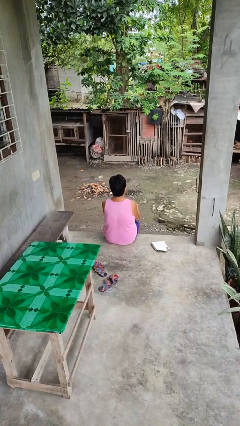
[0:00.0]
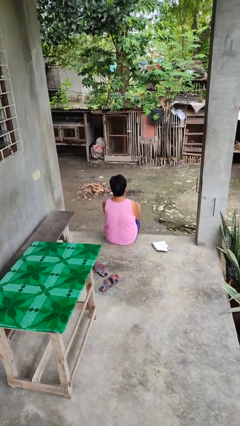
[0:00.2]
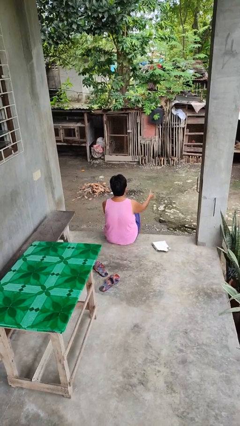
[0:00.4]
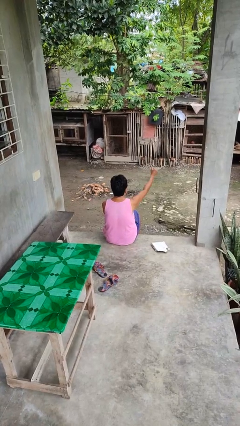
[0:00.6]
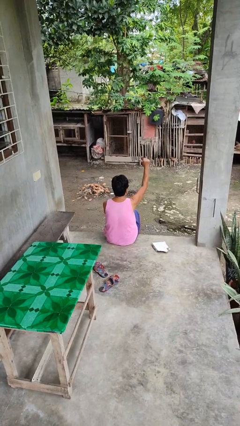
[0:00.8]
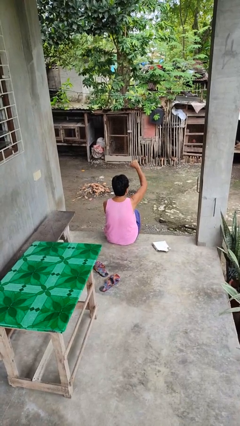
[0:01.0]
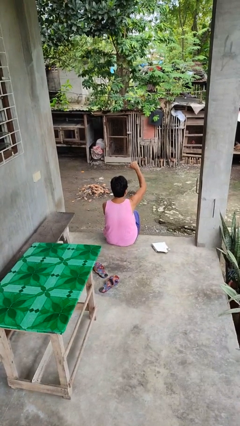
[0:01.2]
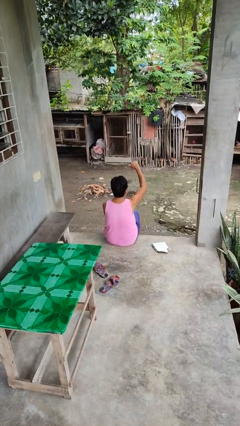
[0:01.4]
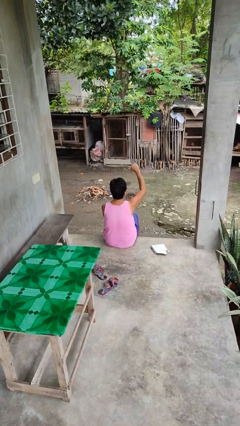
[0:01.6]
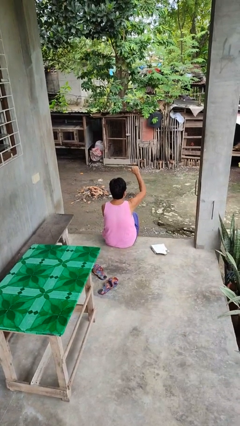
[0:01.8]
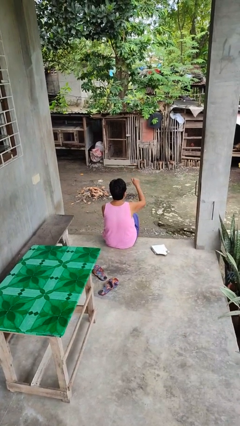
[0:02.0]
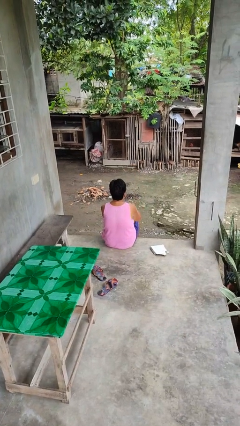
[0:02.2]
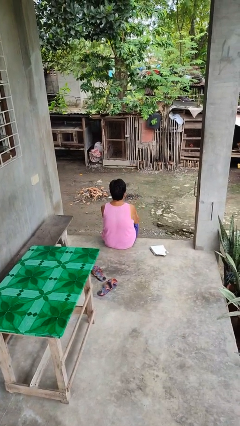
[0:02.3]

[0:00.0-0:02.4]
person gestures thumbs down

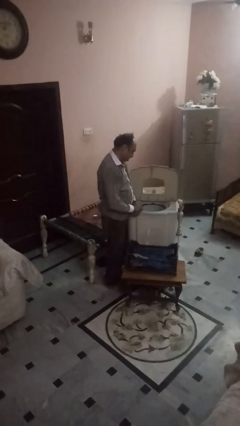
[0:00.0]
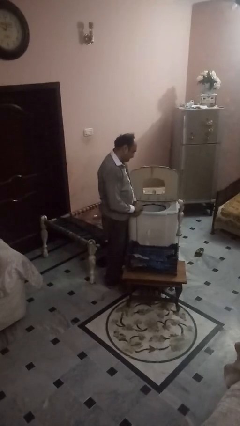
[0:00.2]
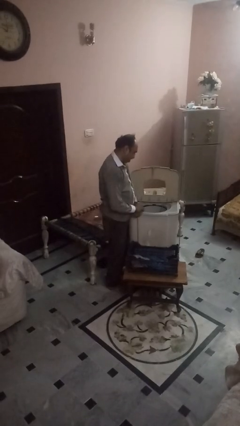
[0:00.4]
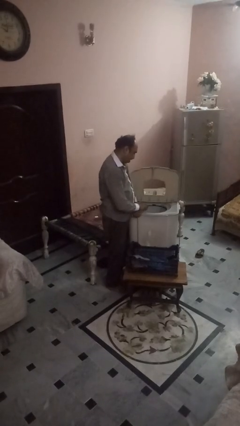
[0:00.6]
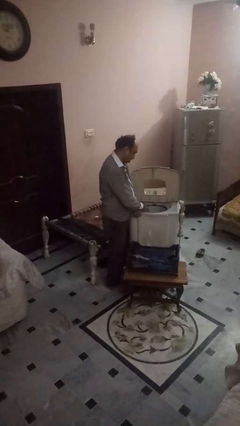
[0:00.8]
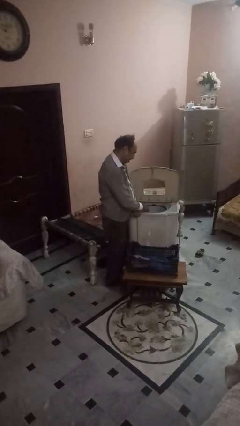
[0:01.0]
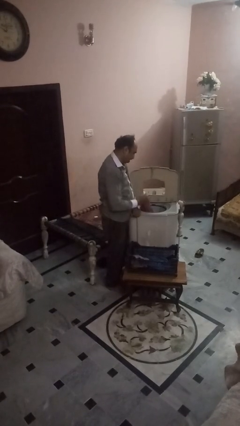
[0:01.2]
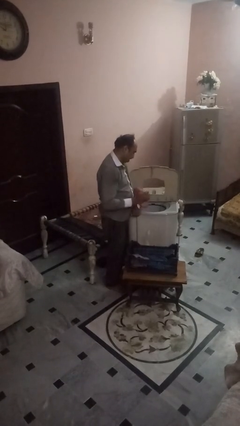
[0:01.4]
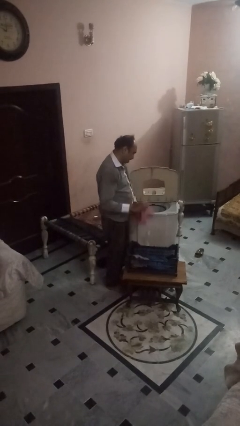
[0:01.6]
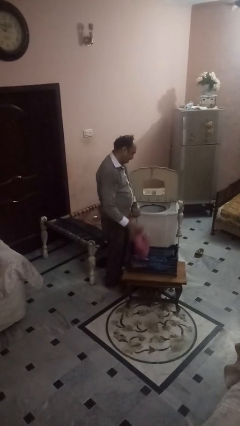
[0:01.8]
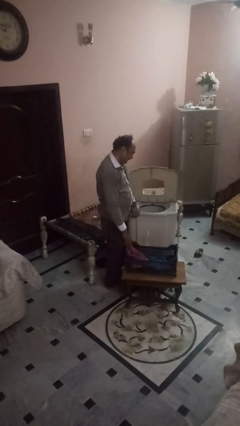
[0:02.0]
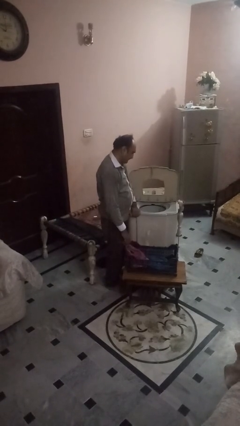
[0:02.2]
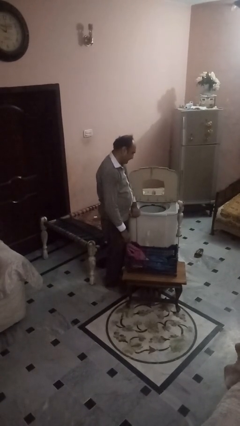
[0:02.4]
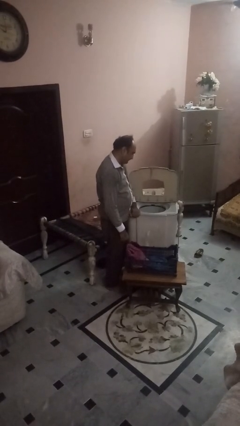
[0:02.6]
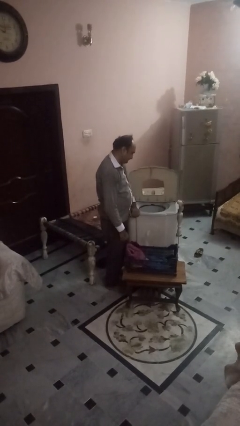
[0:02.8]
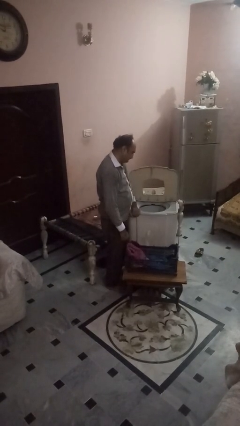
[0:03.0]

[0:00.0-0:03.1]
person unloads dryer

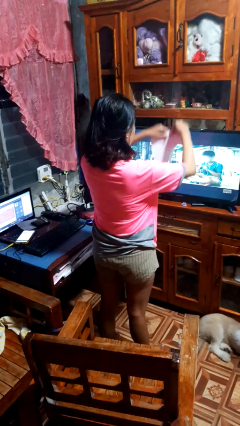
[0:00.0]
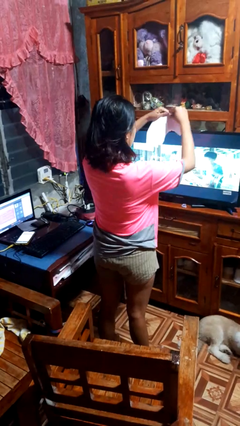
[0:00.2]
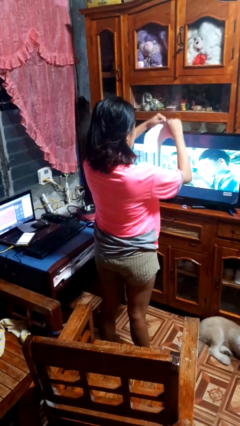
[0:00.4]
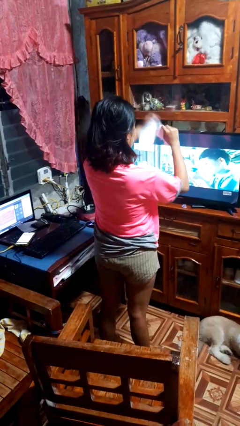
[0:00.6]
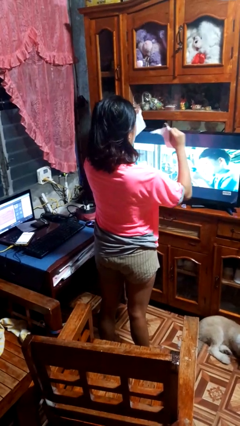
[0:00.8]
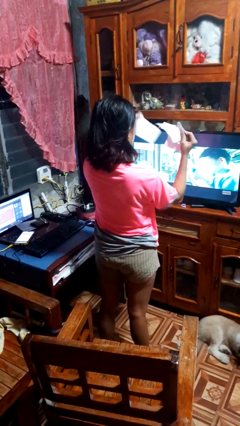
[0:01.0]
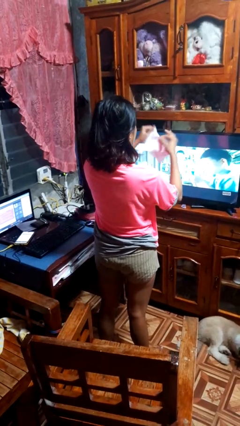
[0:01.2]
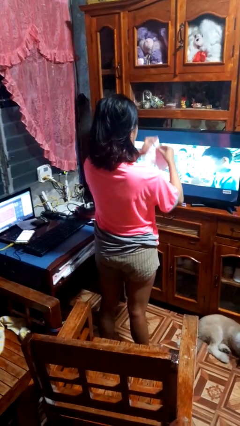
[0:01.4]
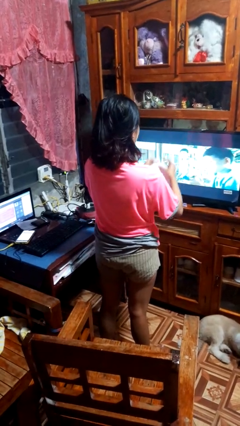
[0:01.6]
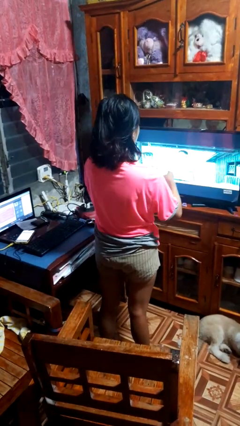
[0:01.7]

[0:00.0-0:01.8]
person tears paper

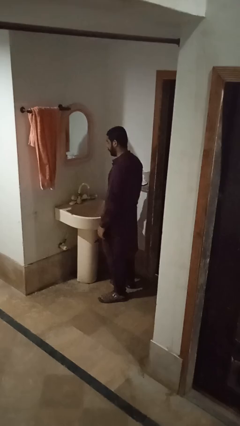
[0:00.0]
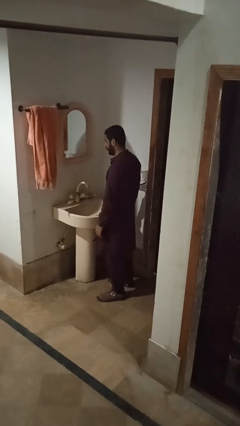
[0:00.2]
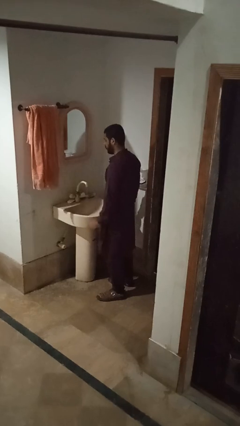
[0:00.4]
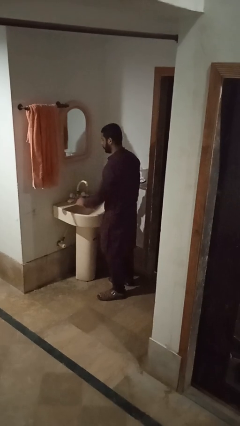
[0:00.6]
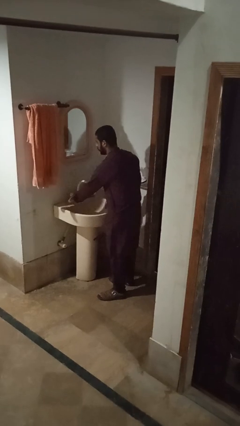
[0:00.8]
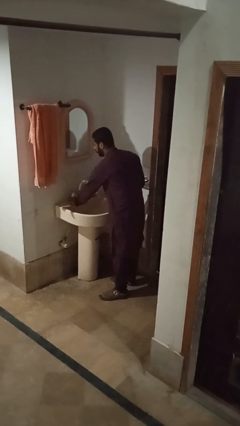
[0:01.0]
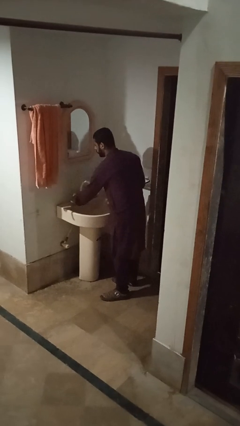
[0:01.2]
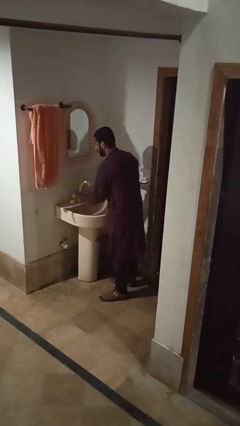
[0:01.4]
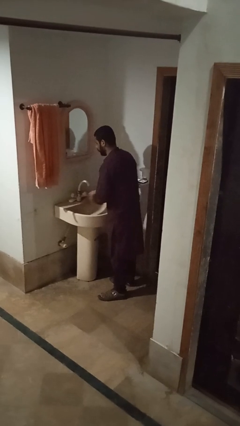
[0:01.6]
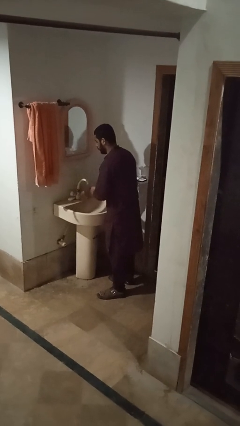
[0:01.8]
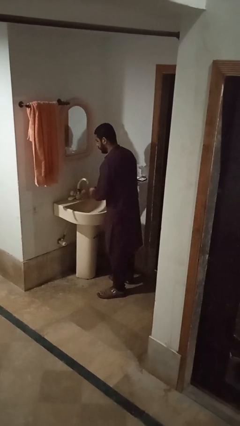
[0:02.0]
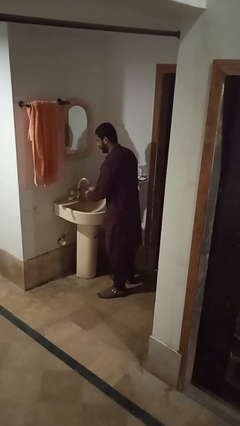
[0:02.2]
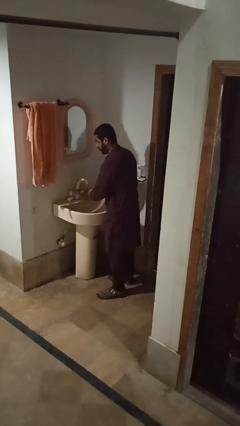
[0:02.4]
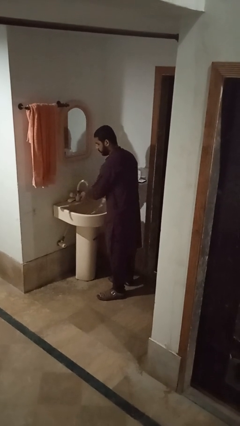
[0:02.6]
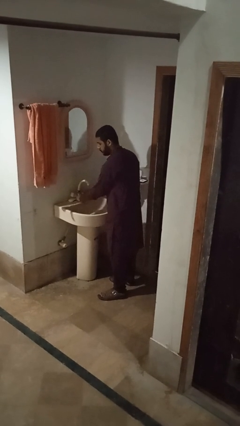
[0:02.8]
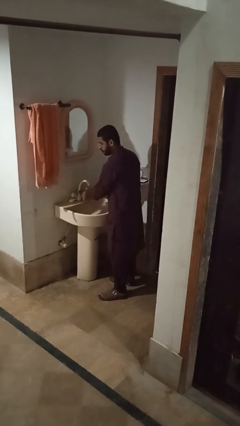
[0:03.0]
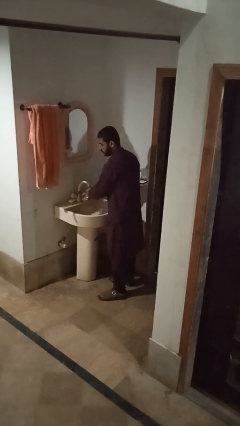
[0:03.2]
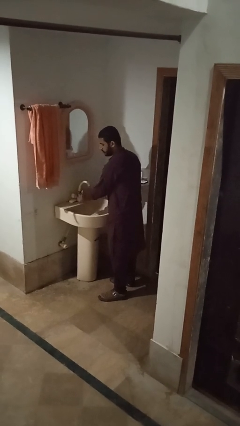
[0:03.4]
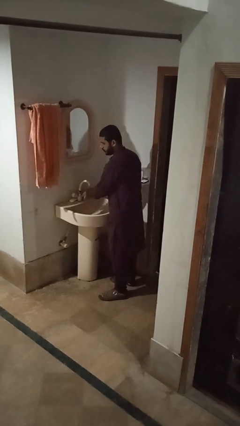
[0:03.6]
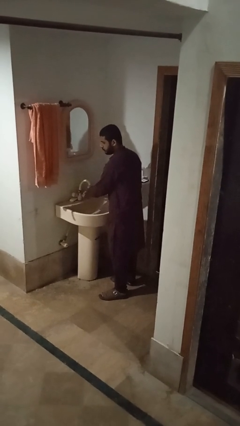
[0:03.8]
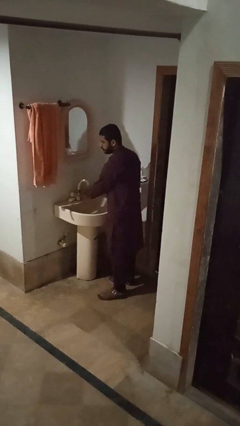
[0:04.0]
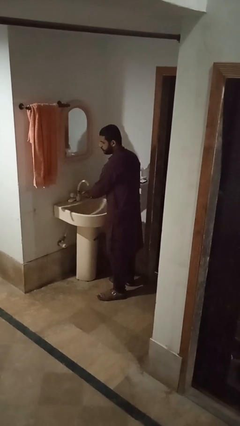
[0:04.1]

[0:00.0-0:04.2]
person washes hands

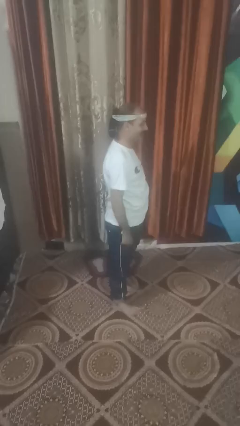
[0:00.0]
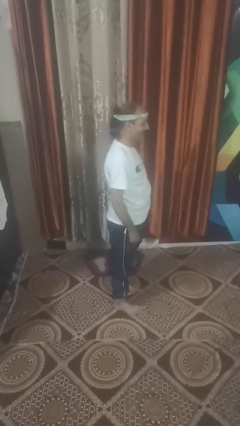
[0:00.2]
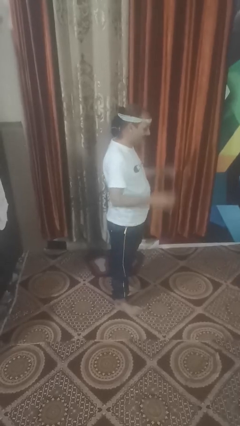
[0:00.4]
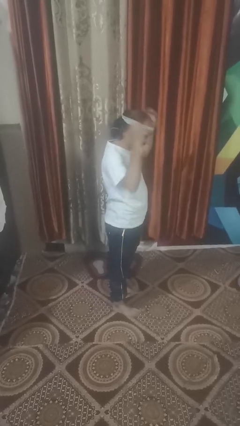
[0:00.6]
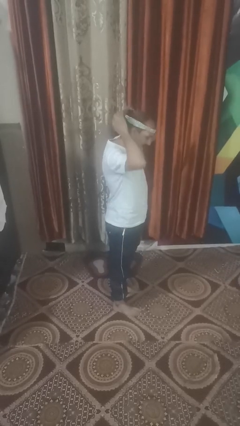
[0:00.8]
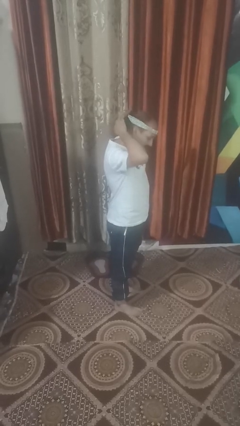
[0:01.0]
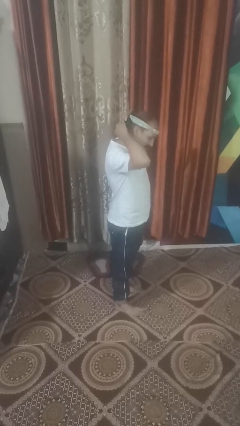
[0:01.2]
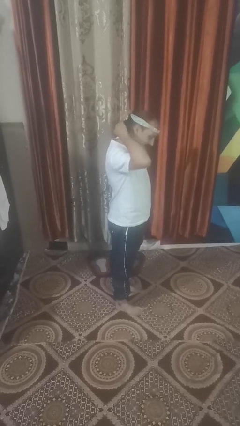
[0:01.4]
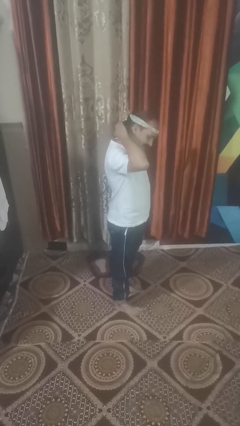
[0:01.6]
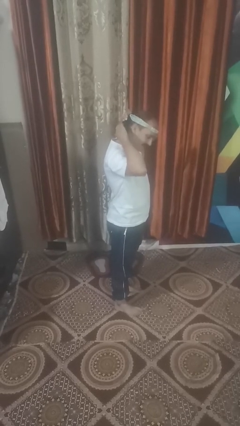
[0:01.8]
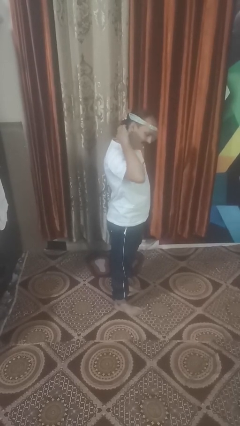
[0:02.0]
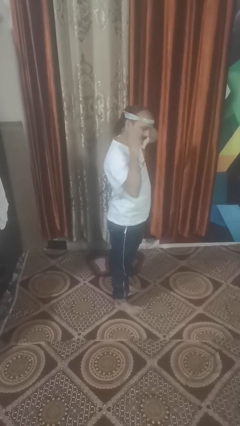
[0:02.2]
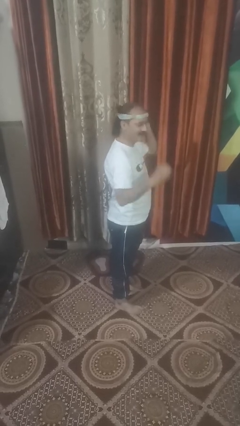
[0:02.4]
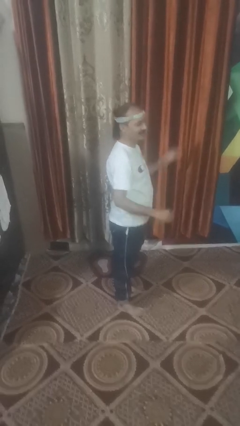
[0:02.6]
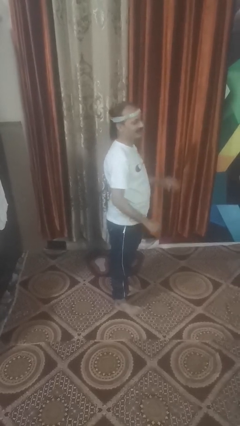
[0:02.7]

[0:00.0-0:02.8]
person takes off hairtie

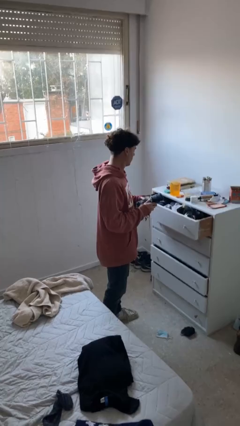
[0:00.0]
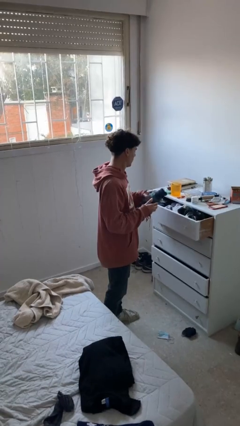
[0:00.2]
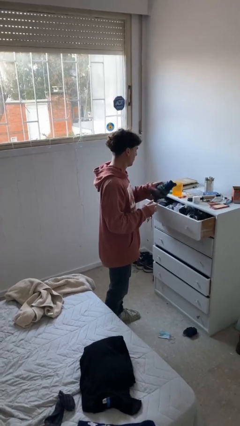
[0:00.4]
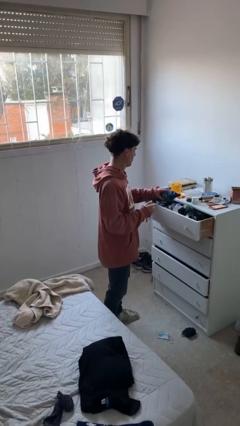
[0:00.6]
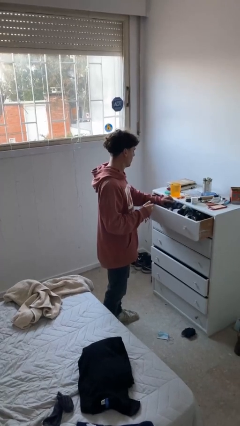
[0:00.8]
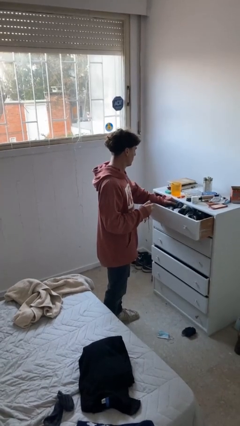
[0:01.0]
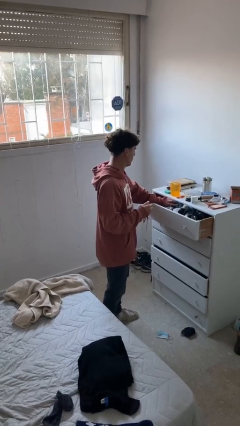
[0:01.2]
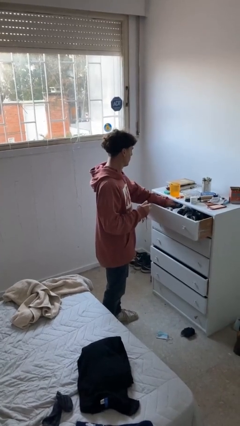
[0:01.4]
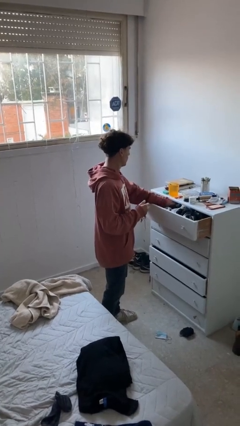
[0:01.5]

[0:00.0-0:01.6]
person puts clothes into dresser

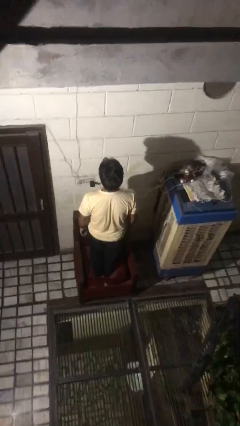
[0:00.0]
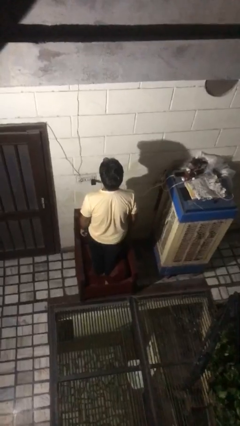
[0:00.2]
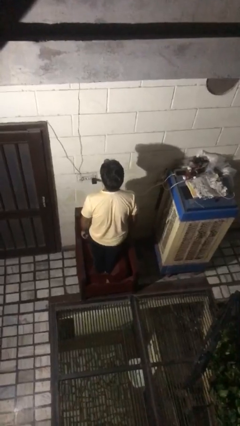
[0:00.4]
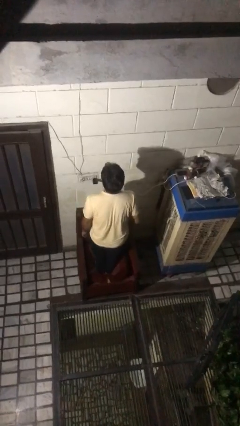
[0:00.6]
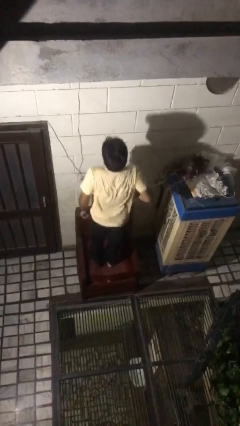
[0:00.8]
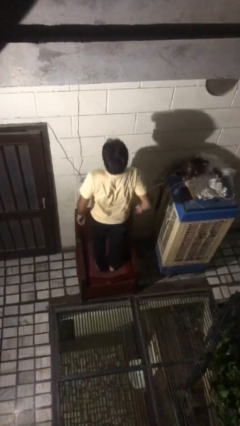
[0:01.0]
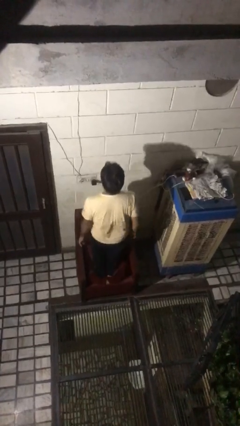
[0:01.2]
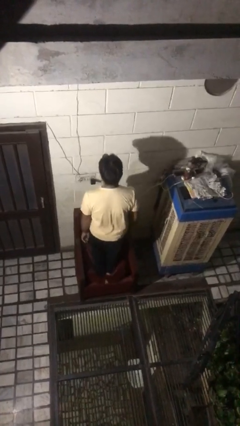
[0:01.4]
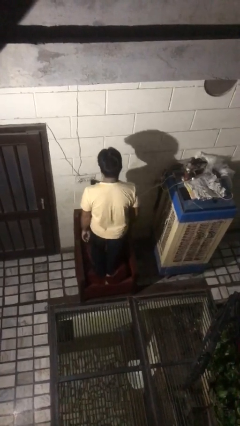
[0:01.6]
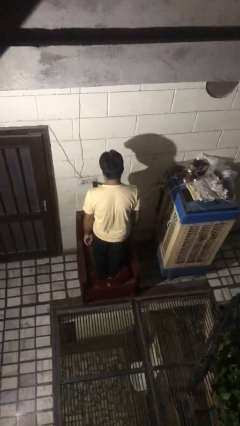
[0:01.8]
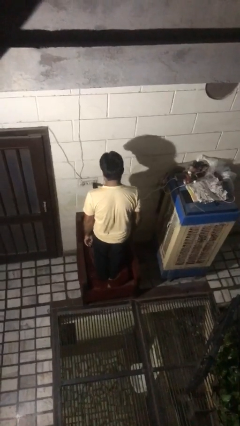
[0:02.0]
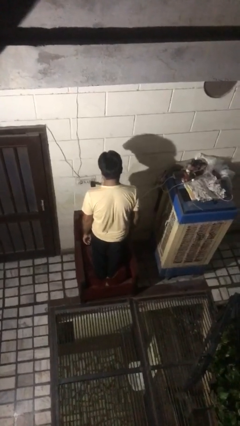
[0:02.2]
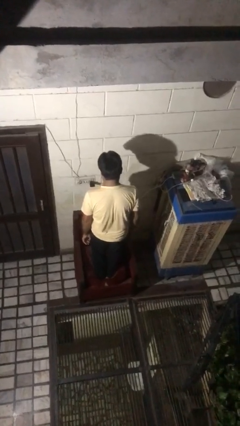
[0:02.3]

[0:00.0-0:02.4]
person jumps on couch
